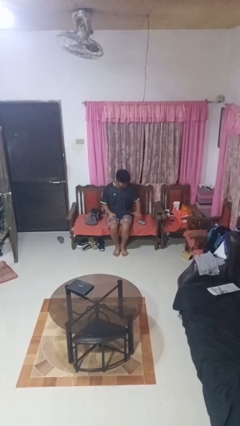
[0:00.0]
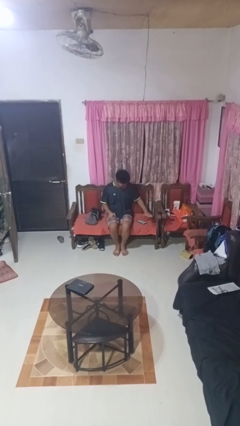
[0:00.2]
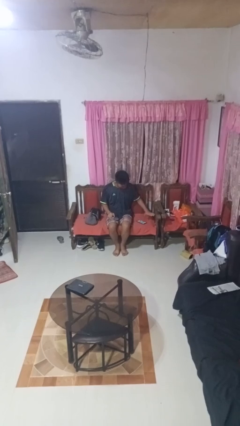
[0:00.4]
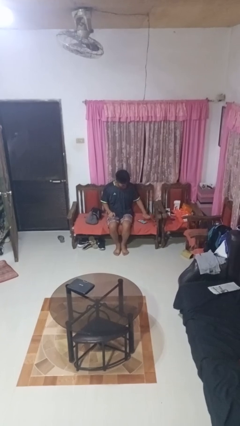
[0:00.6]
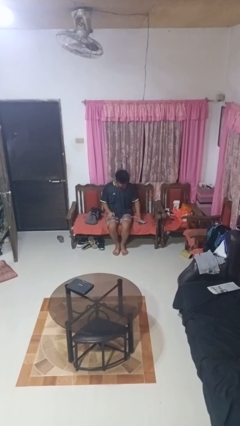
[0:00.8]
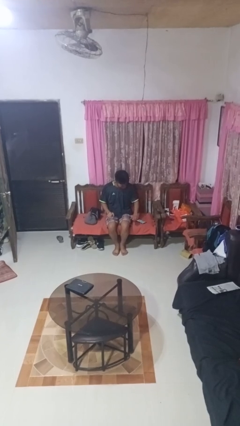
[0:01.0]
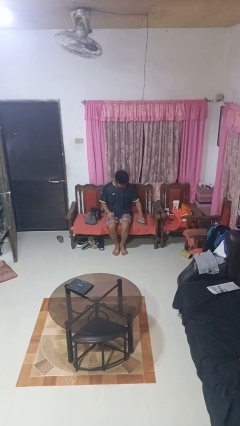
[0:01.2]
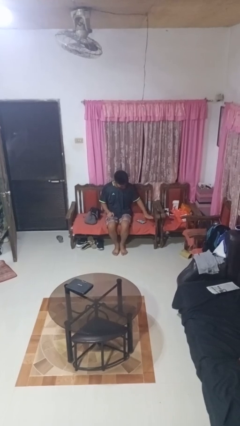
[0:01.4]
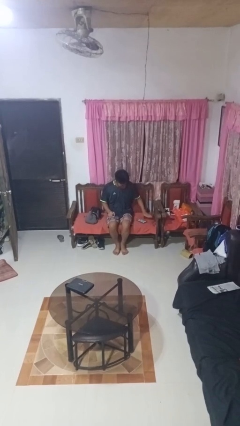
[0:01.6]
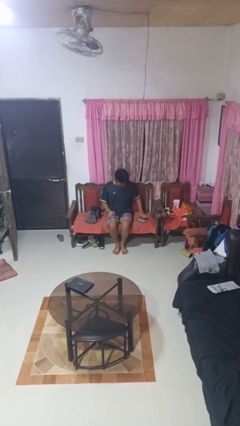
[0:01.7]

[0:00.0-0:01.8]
person waves hand over object

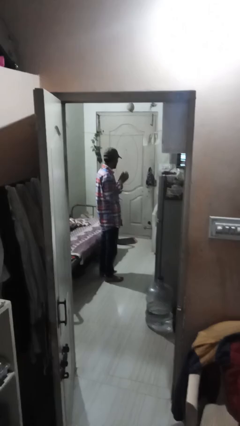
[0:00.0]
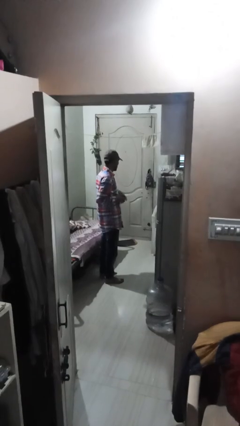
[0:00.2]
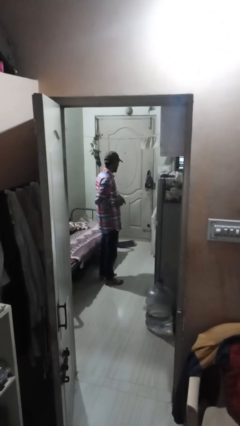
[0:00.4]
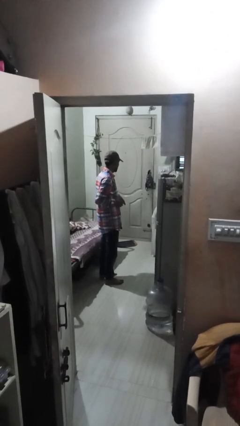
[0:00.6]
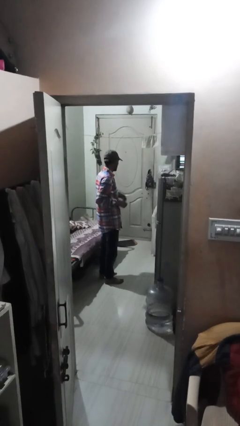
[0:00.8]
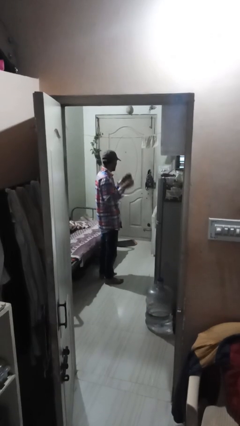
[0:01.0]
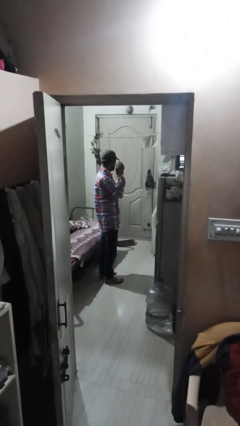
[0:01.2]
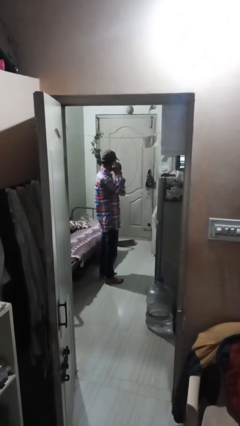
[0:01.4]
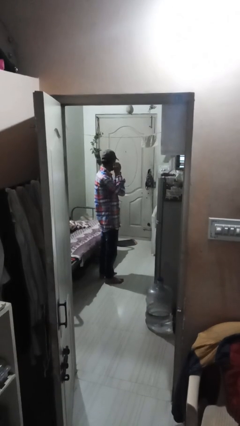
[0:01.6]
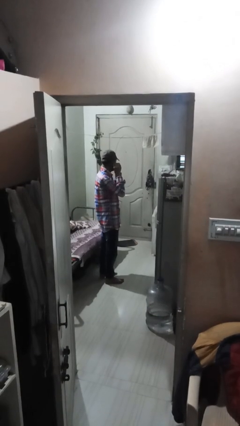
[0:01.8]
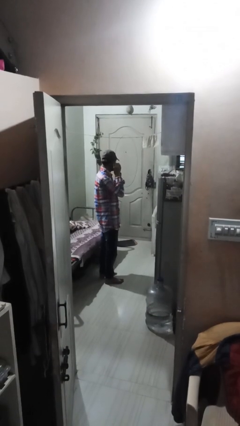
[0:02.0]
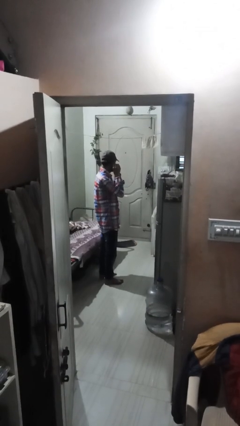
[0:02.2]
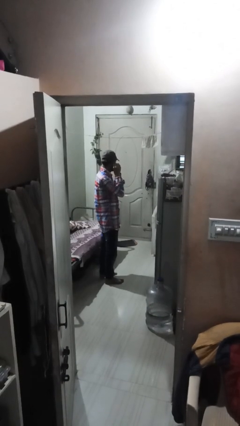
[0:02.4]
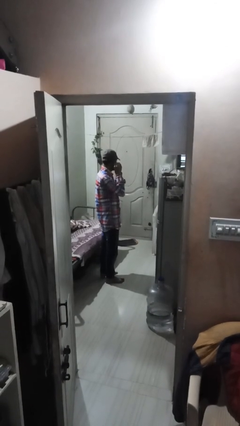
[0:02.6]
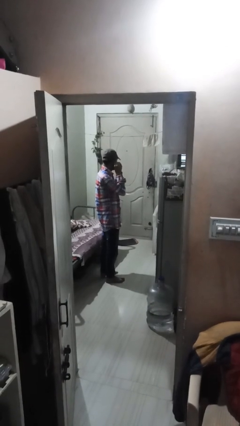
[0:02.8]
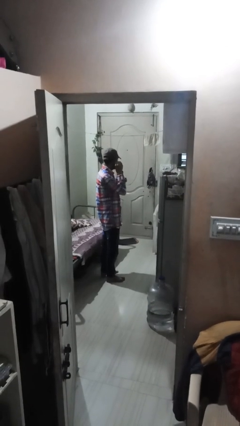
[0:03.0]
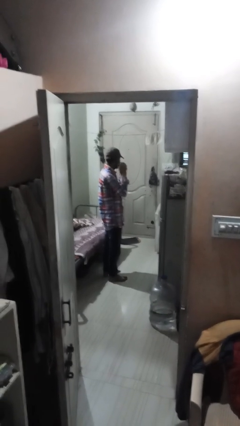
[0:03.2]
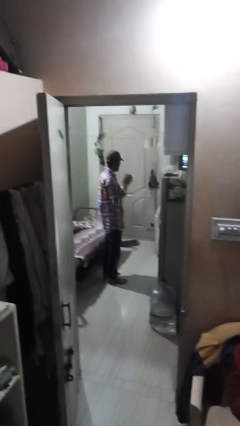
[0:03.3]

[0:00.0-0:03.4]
person takes off earrings

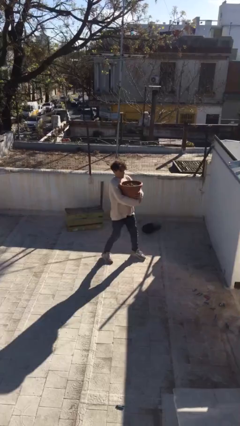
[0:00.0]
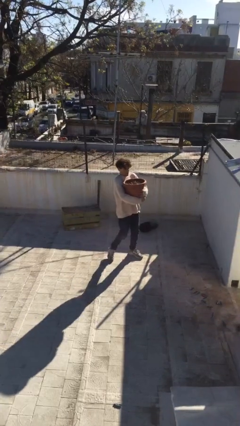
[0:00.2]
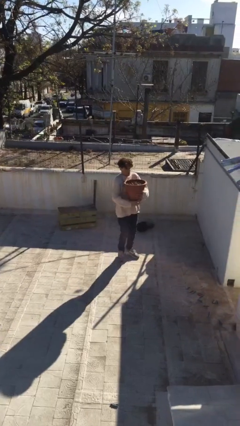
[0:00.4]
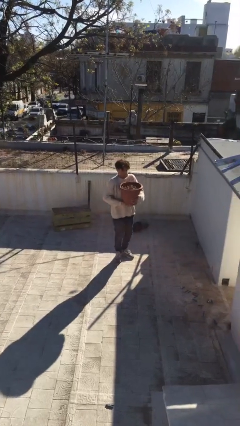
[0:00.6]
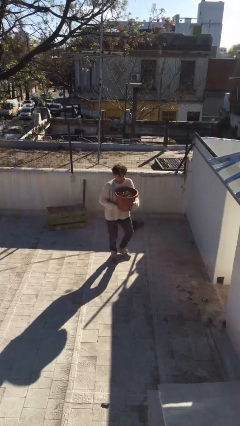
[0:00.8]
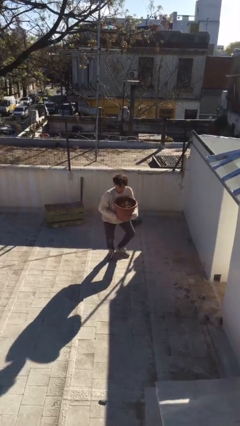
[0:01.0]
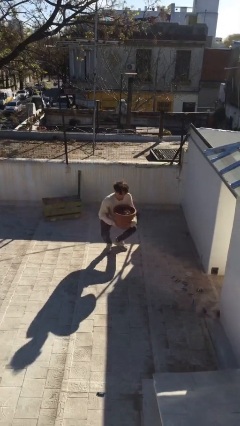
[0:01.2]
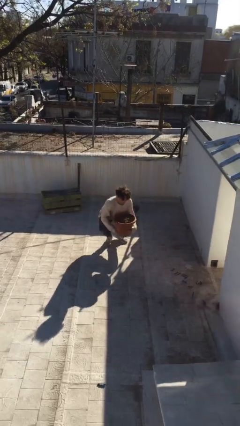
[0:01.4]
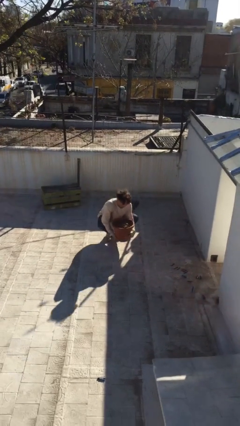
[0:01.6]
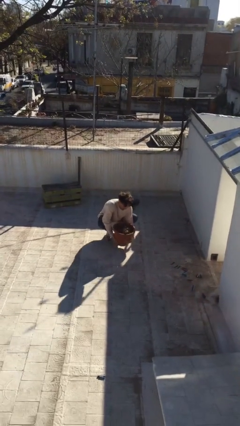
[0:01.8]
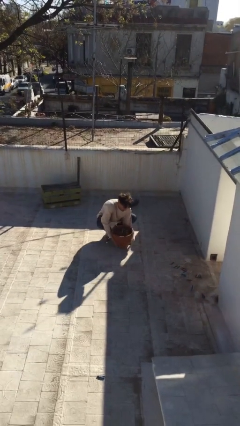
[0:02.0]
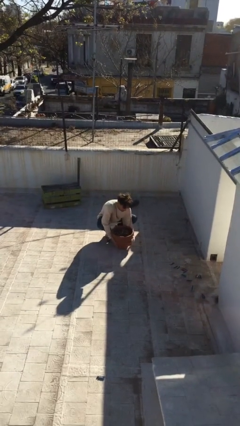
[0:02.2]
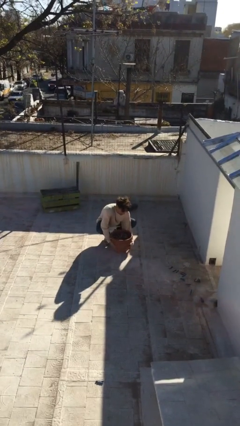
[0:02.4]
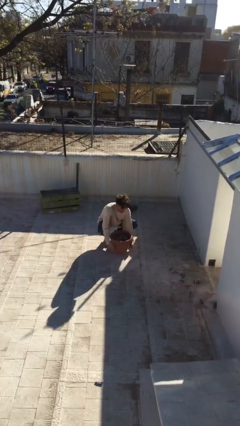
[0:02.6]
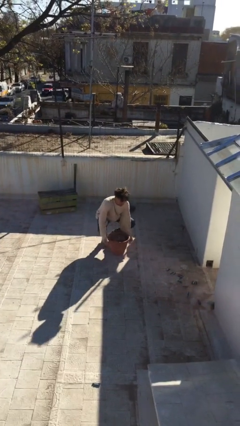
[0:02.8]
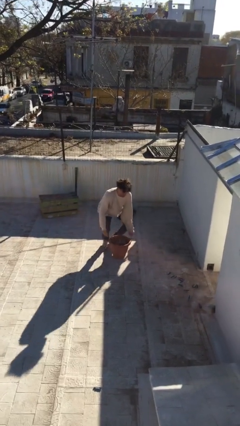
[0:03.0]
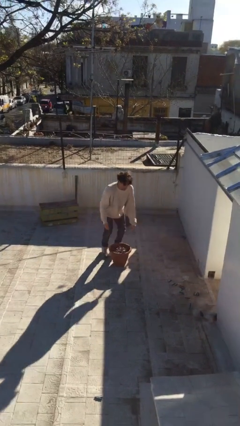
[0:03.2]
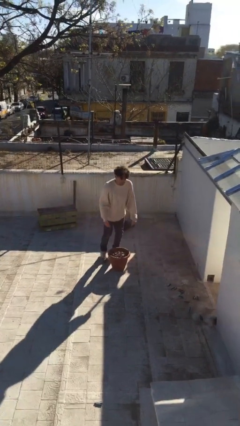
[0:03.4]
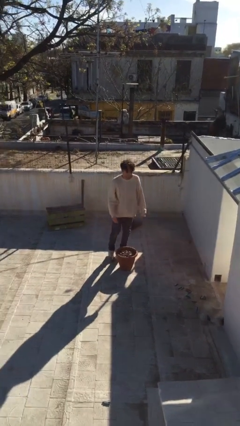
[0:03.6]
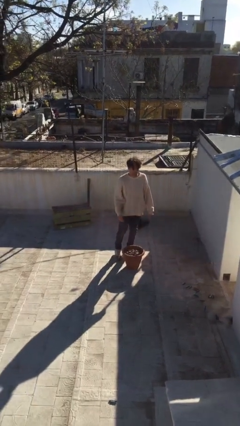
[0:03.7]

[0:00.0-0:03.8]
person puts down object on floor

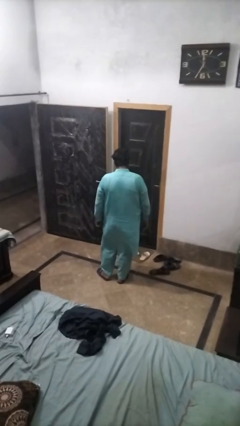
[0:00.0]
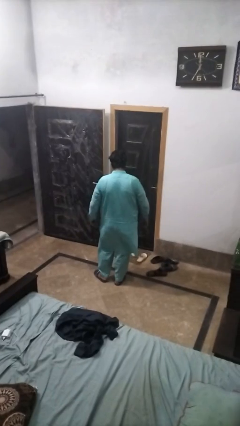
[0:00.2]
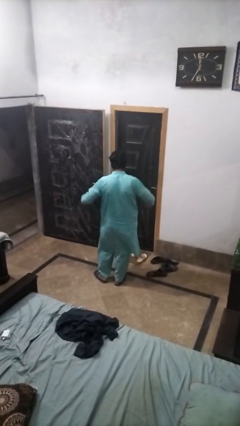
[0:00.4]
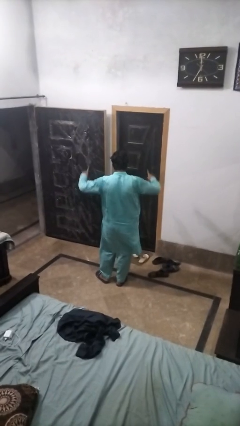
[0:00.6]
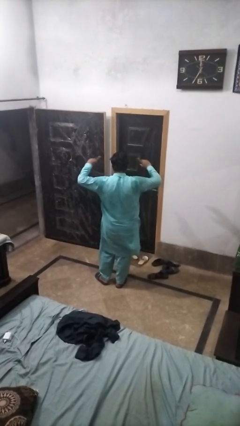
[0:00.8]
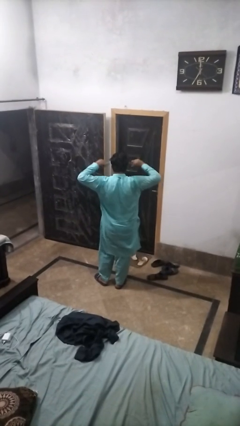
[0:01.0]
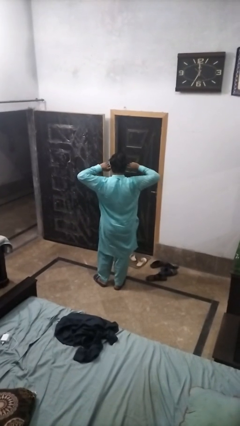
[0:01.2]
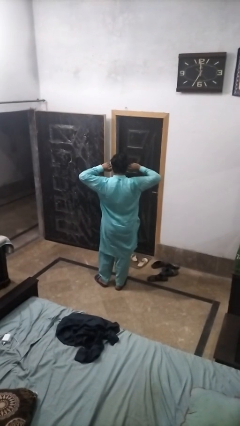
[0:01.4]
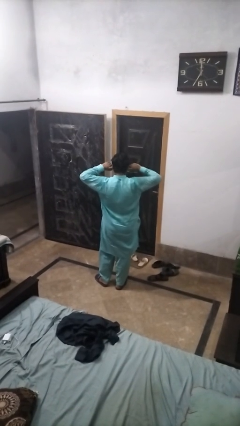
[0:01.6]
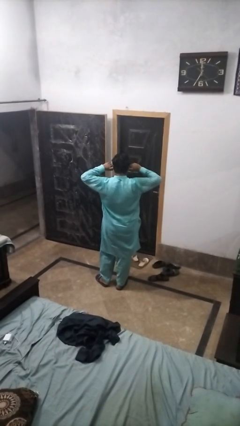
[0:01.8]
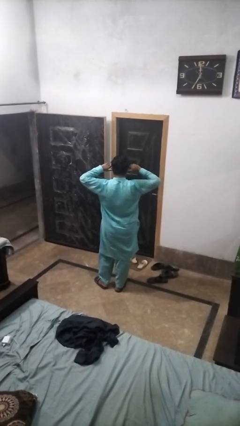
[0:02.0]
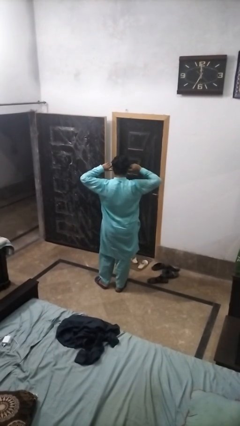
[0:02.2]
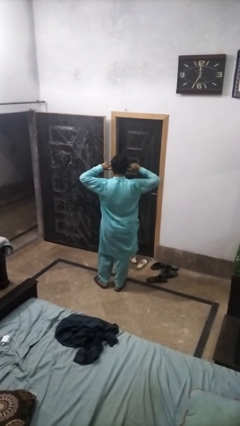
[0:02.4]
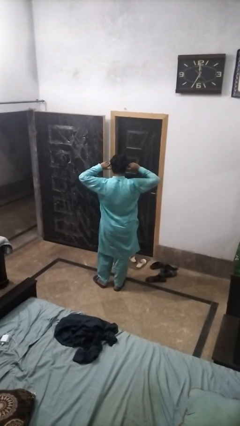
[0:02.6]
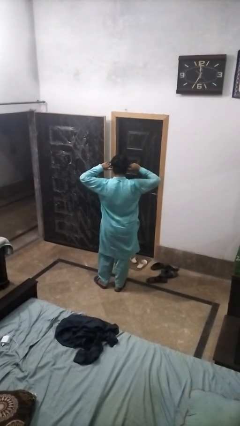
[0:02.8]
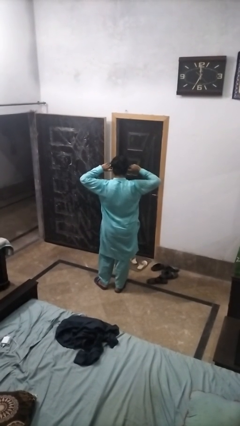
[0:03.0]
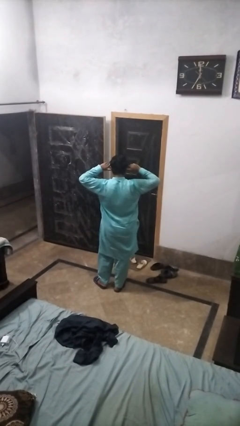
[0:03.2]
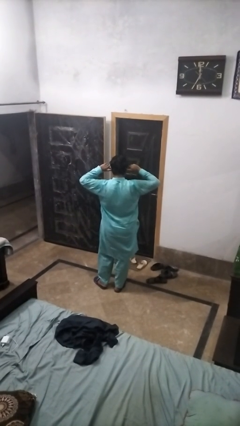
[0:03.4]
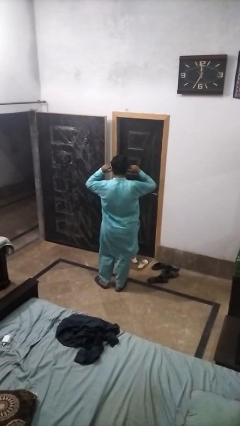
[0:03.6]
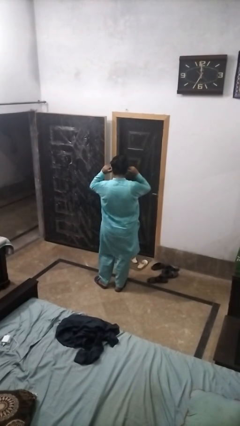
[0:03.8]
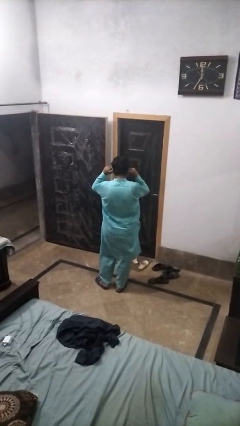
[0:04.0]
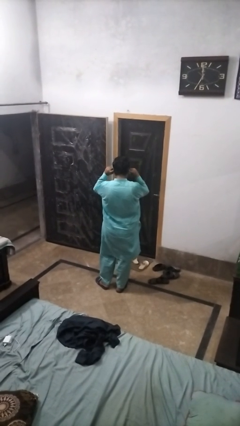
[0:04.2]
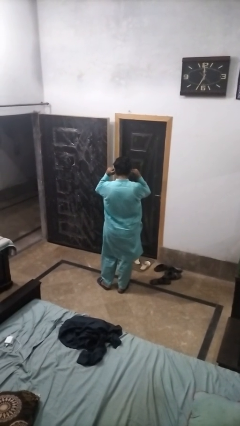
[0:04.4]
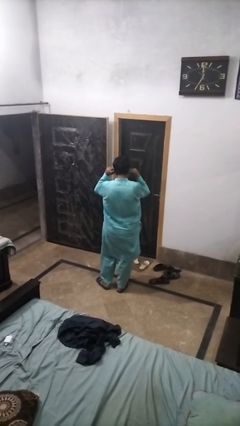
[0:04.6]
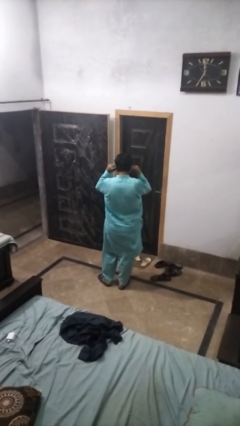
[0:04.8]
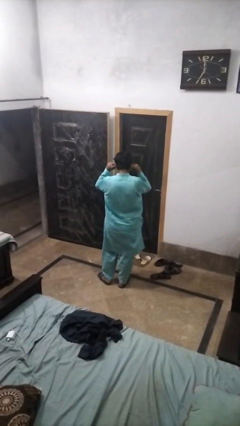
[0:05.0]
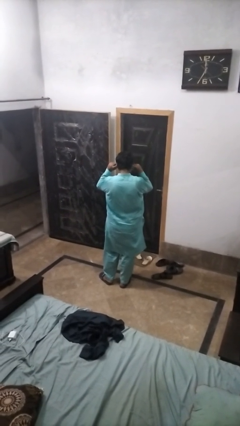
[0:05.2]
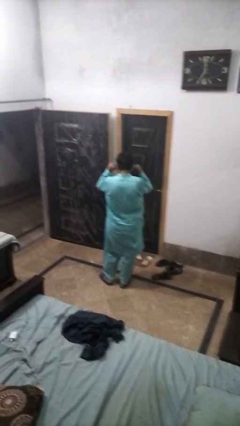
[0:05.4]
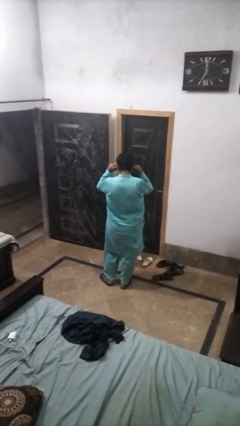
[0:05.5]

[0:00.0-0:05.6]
person puts fingers in ear

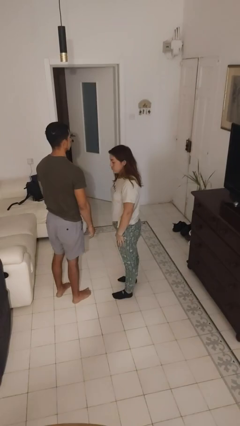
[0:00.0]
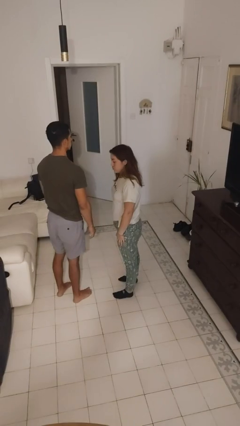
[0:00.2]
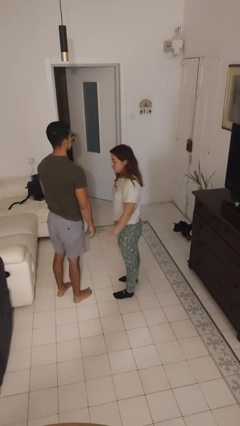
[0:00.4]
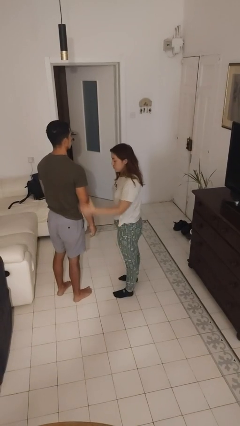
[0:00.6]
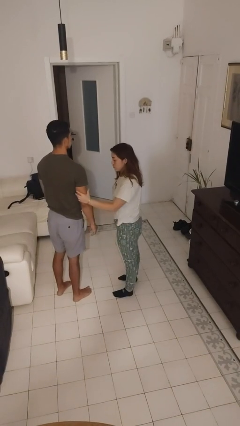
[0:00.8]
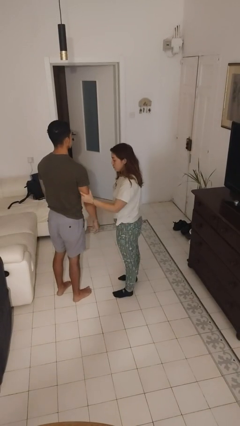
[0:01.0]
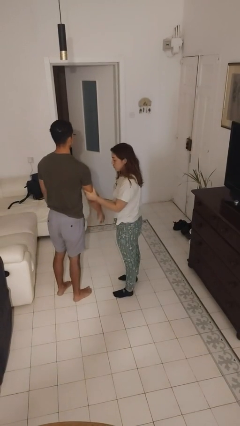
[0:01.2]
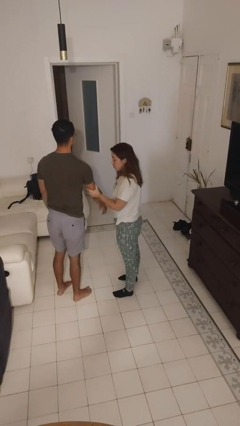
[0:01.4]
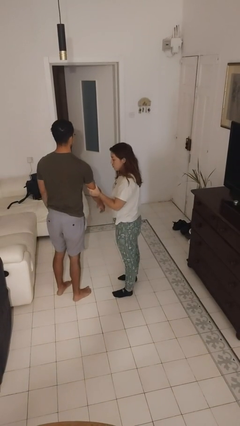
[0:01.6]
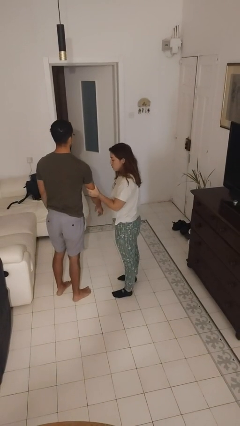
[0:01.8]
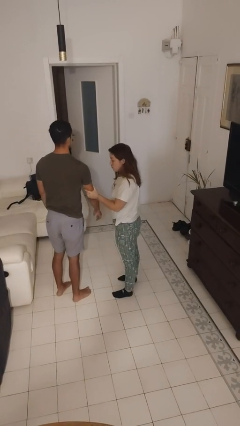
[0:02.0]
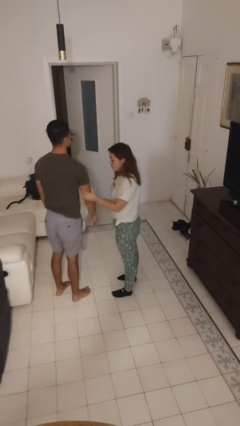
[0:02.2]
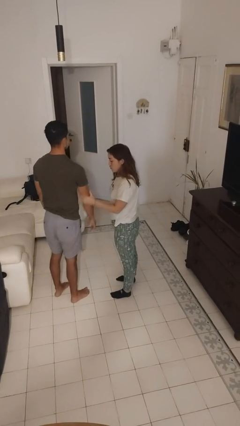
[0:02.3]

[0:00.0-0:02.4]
person grabs person by bicep

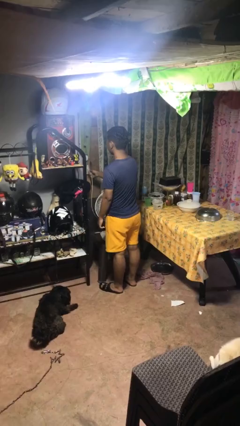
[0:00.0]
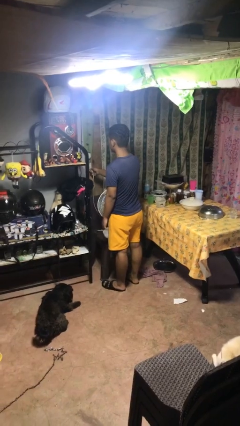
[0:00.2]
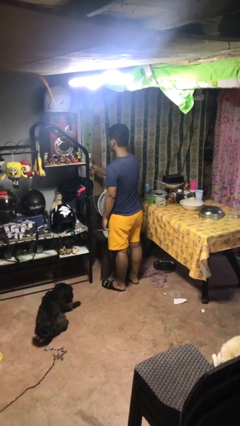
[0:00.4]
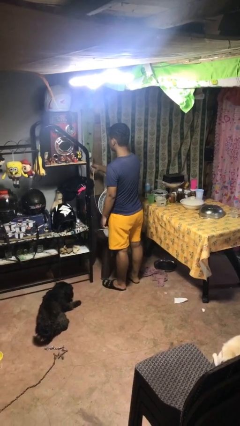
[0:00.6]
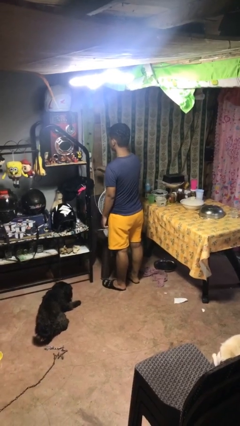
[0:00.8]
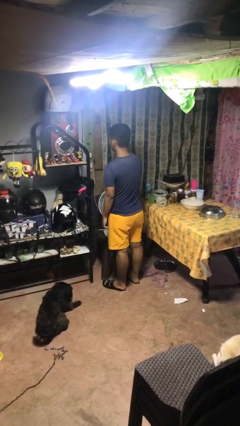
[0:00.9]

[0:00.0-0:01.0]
person plugs into electrical socket
